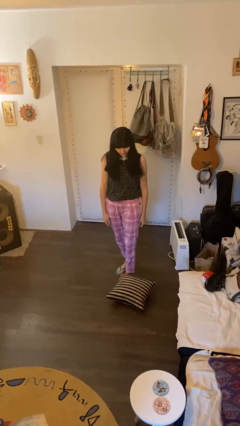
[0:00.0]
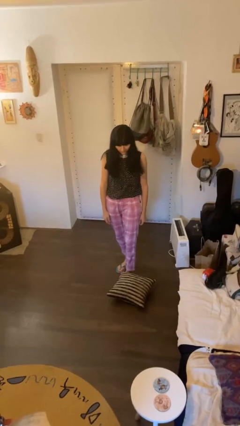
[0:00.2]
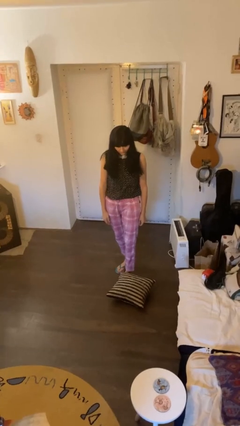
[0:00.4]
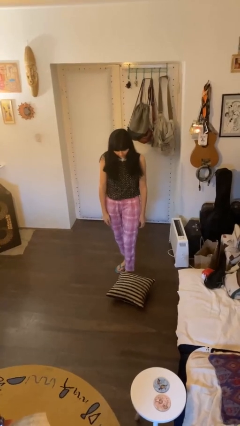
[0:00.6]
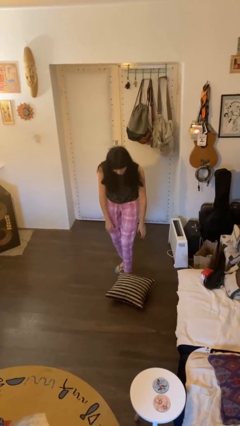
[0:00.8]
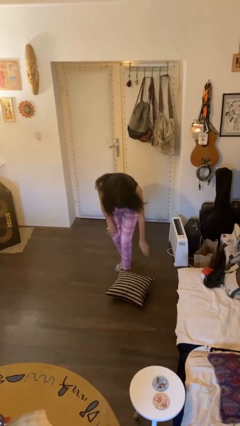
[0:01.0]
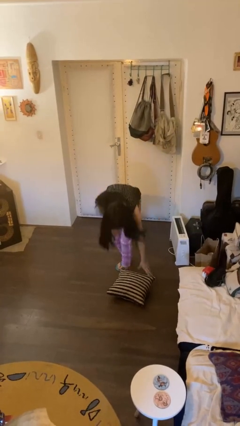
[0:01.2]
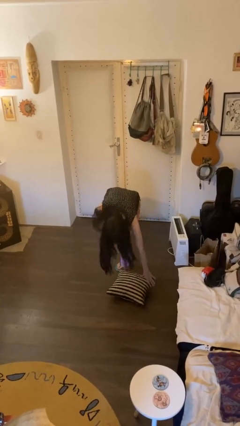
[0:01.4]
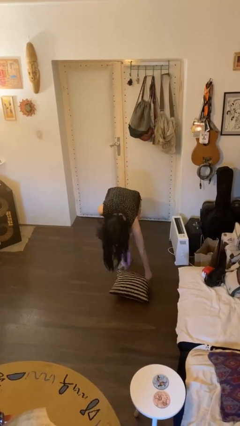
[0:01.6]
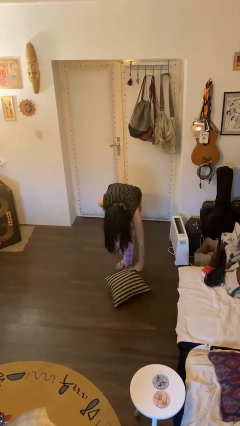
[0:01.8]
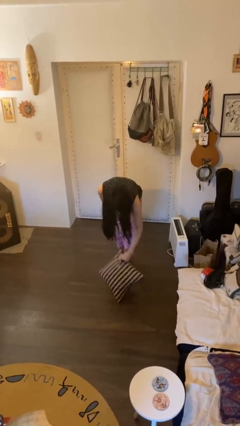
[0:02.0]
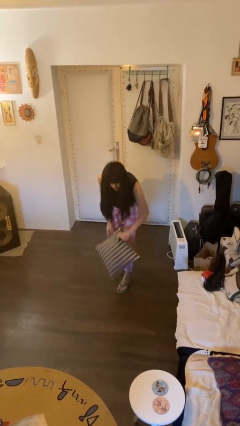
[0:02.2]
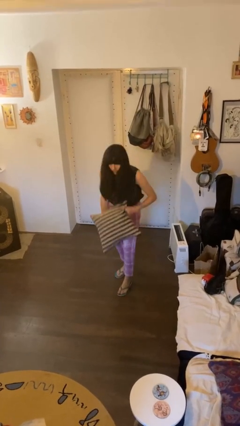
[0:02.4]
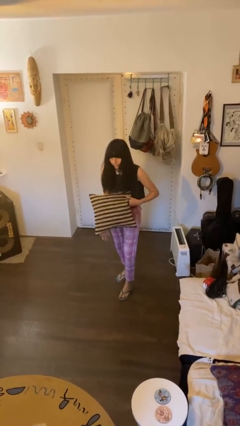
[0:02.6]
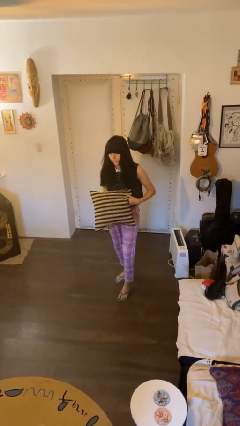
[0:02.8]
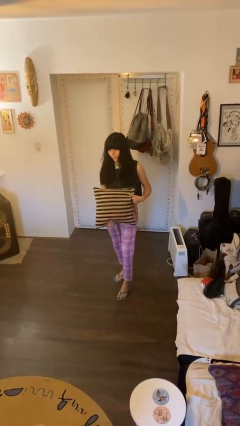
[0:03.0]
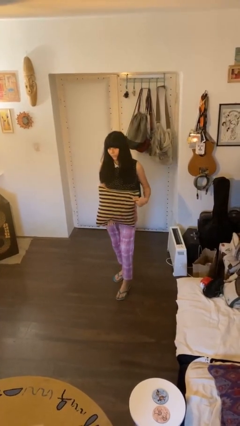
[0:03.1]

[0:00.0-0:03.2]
person picks up object from floor

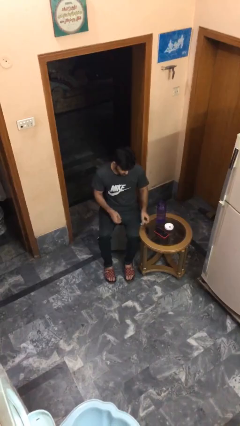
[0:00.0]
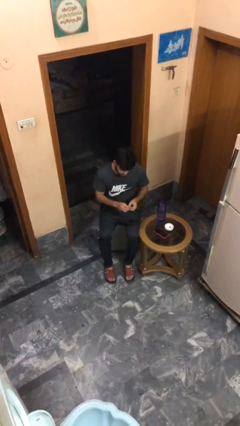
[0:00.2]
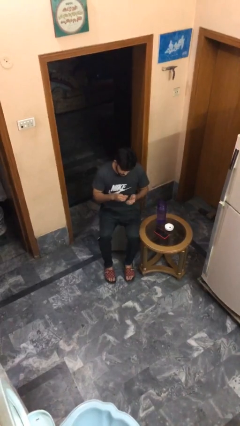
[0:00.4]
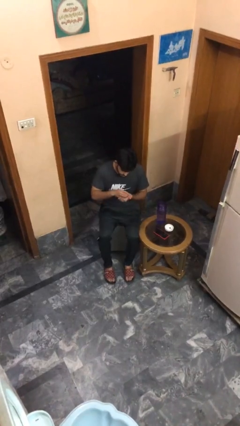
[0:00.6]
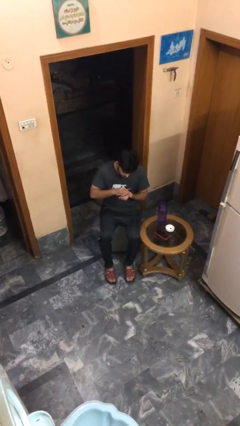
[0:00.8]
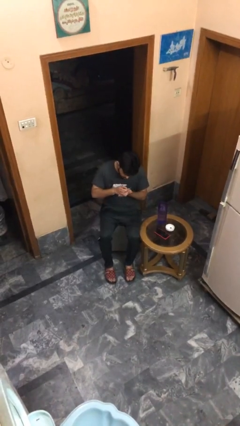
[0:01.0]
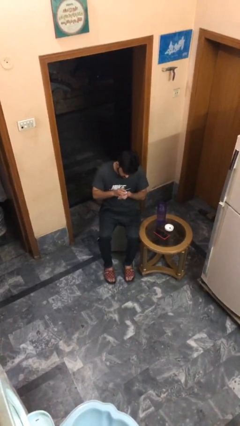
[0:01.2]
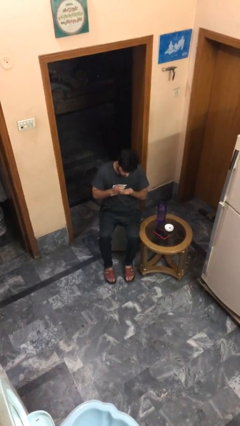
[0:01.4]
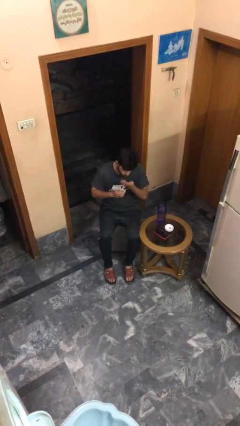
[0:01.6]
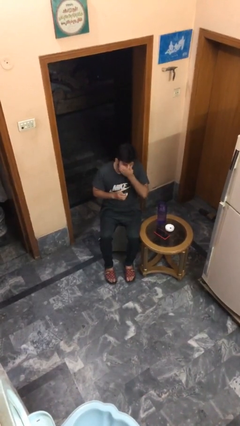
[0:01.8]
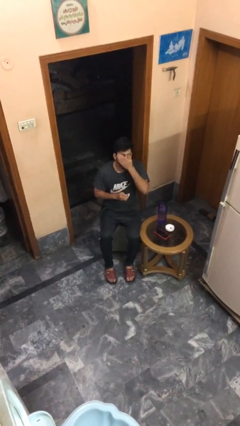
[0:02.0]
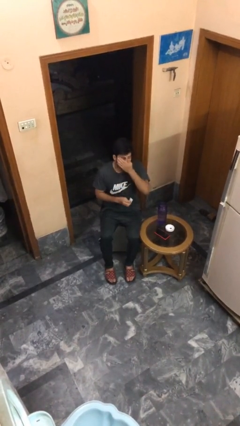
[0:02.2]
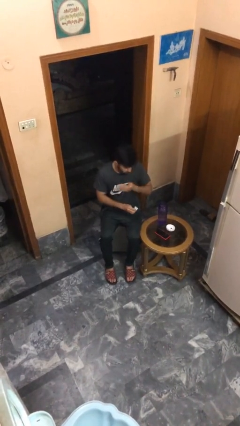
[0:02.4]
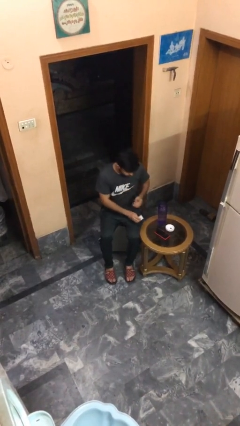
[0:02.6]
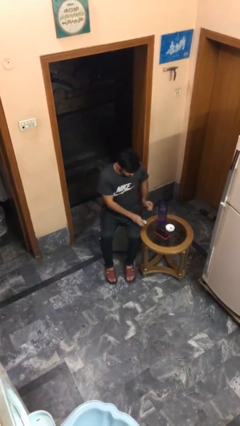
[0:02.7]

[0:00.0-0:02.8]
person takes medicine pills

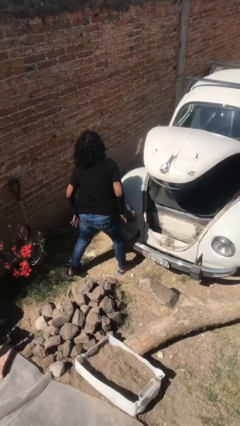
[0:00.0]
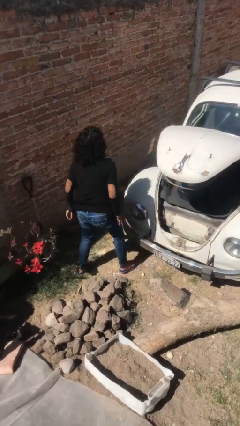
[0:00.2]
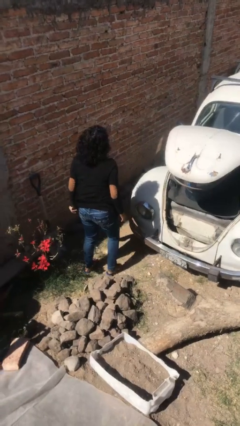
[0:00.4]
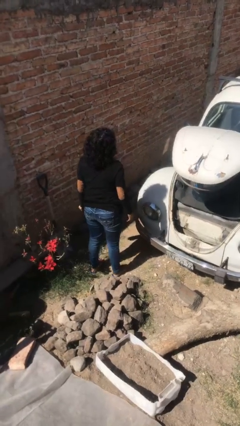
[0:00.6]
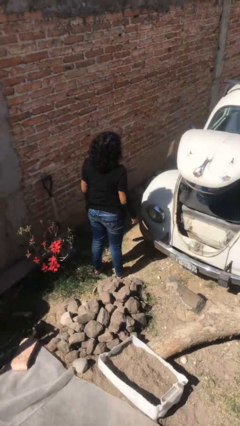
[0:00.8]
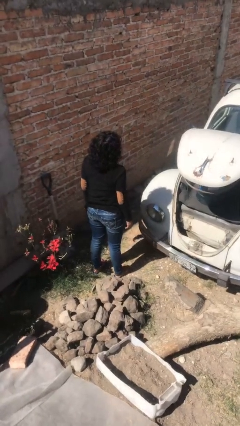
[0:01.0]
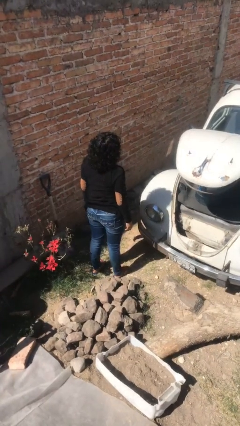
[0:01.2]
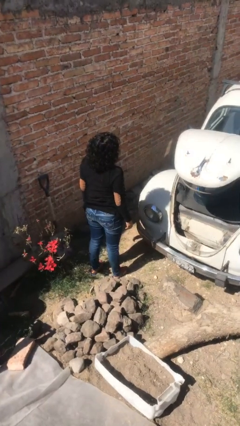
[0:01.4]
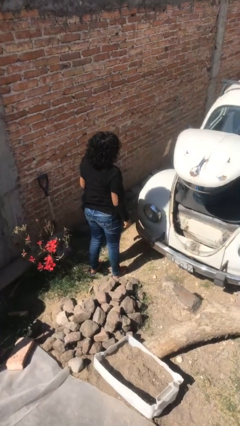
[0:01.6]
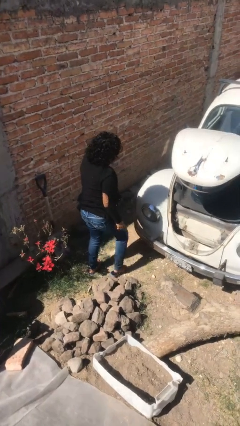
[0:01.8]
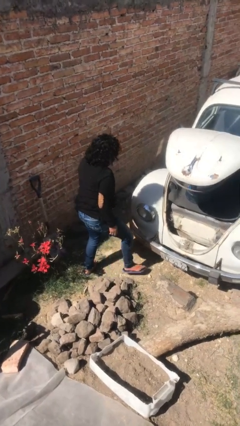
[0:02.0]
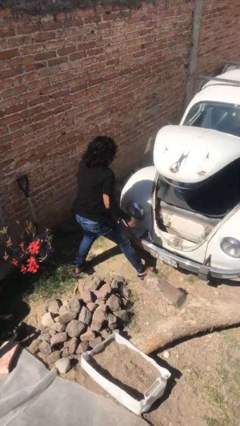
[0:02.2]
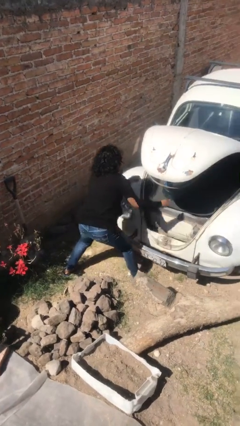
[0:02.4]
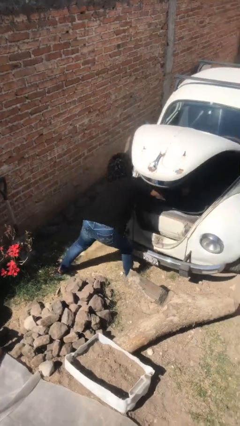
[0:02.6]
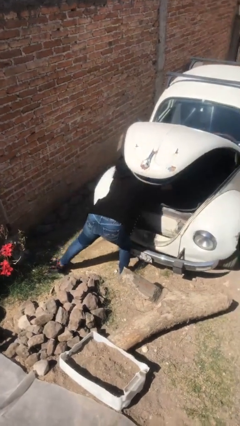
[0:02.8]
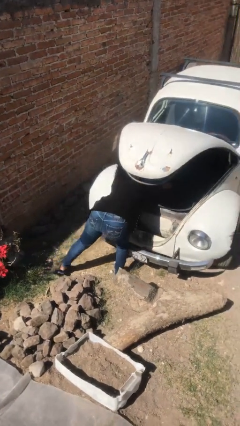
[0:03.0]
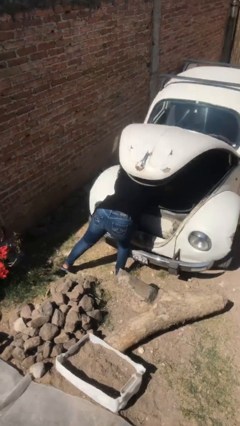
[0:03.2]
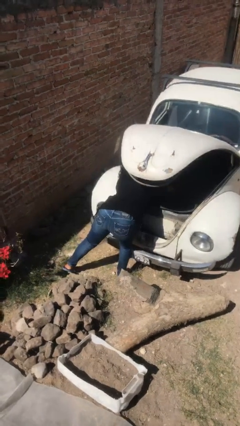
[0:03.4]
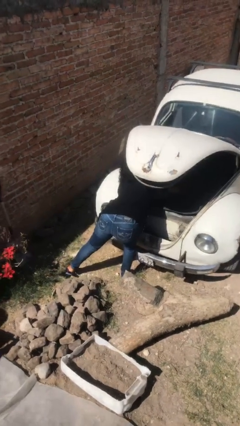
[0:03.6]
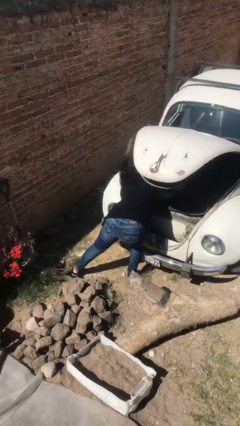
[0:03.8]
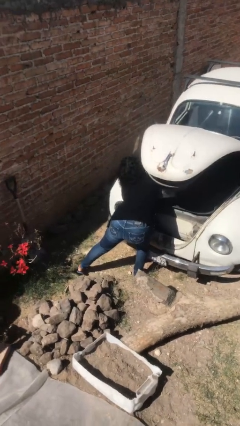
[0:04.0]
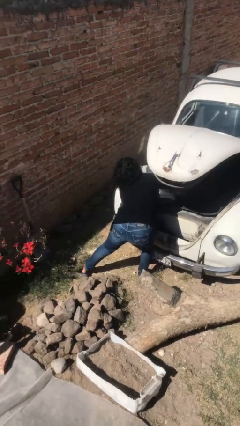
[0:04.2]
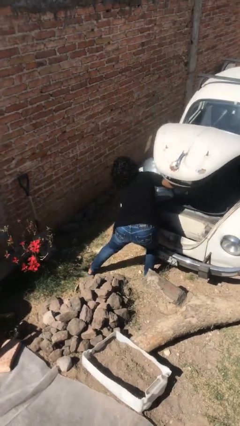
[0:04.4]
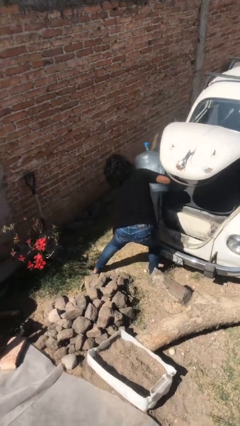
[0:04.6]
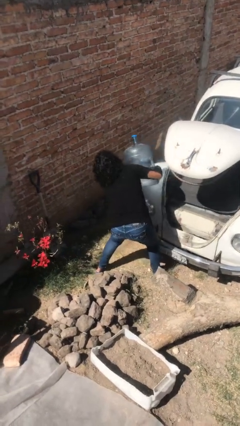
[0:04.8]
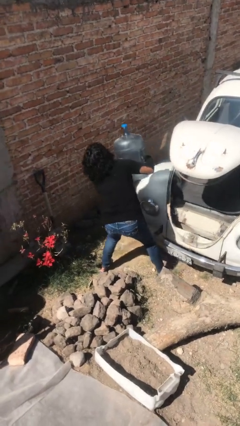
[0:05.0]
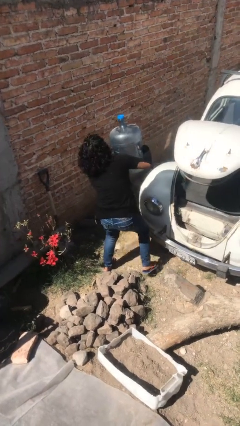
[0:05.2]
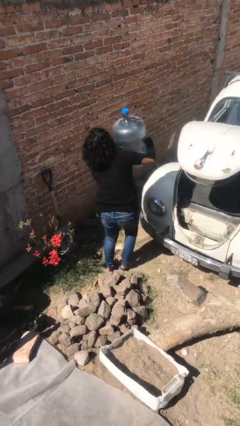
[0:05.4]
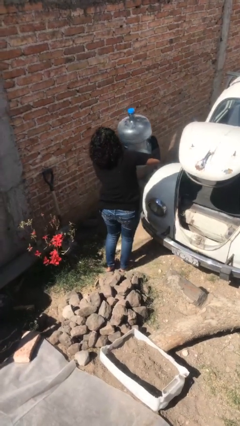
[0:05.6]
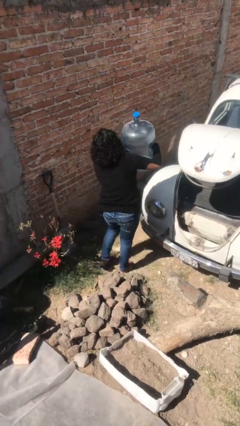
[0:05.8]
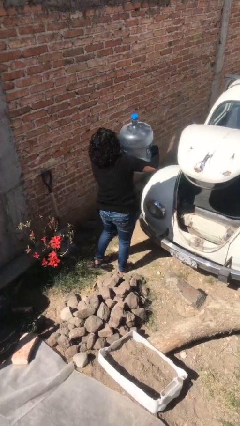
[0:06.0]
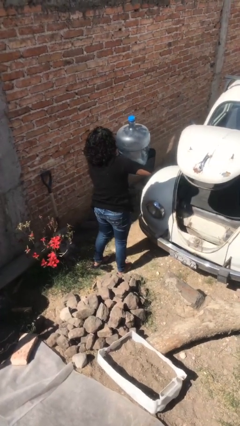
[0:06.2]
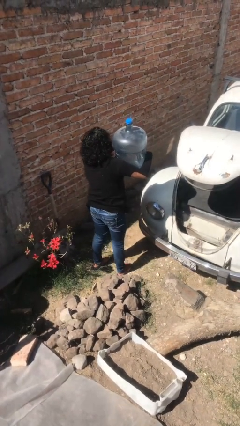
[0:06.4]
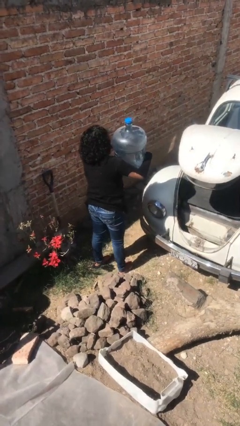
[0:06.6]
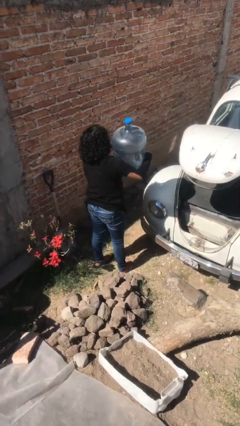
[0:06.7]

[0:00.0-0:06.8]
person unloads car

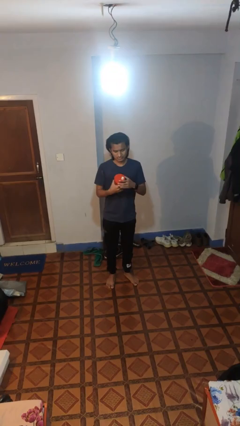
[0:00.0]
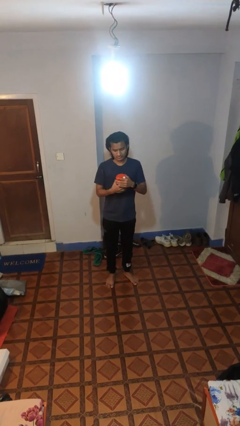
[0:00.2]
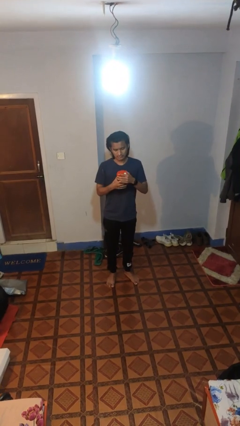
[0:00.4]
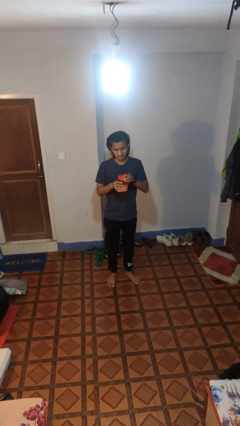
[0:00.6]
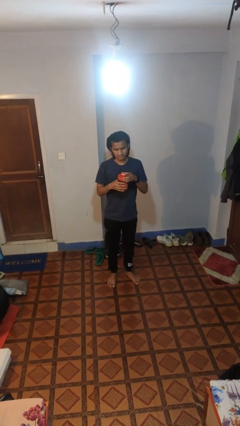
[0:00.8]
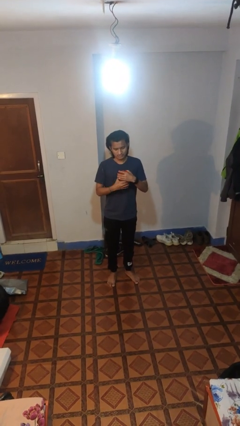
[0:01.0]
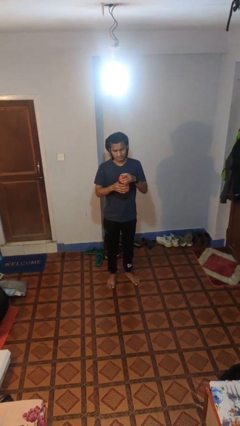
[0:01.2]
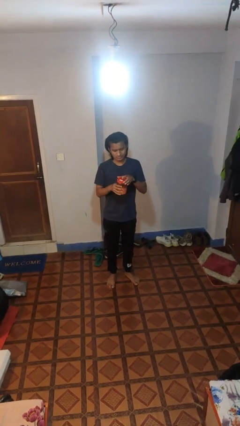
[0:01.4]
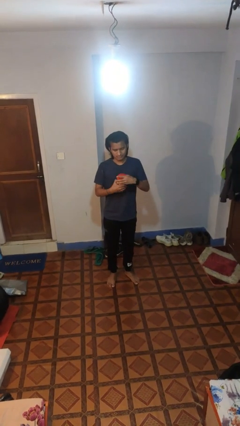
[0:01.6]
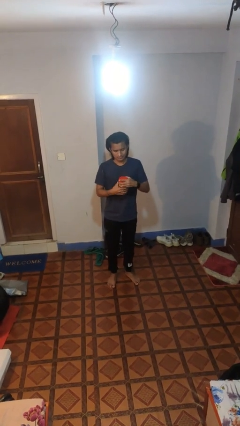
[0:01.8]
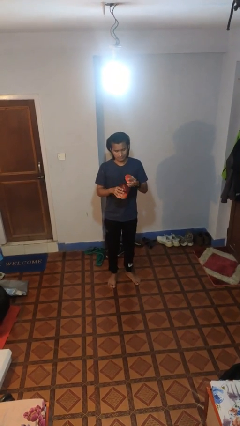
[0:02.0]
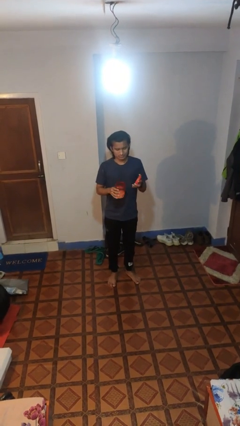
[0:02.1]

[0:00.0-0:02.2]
person opens jar

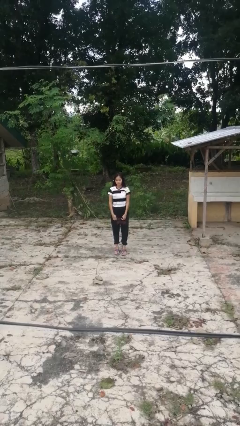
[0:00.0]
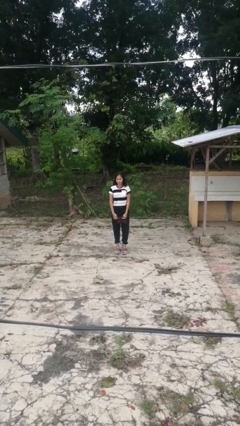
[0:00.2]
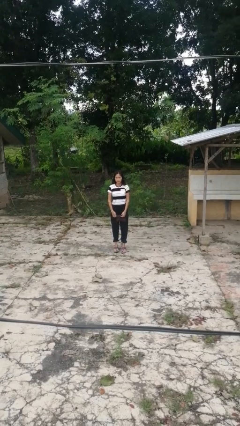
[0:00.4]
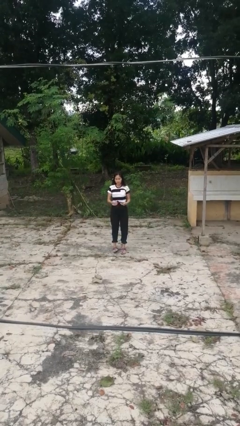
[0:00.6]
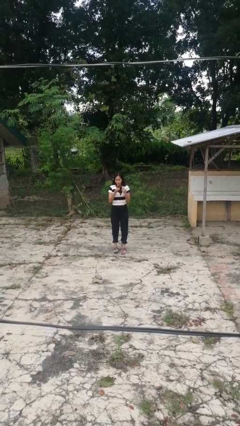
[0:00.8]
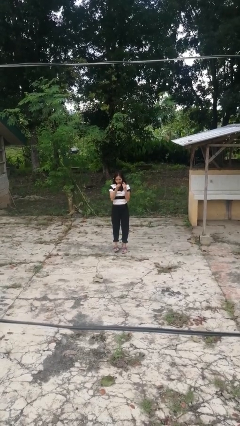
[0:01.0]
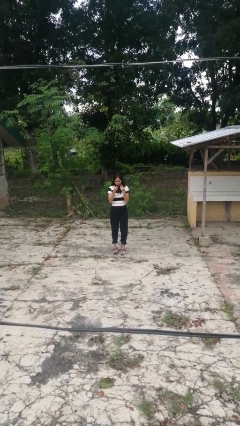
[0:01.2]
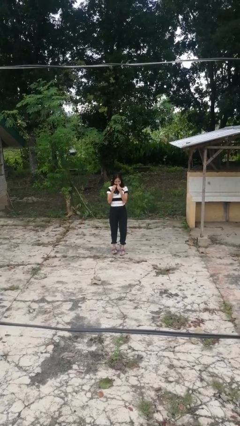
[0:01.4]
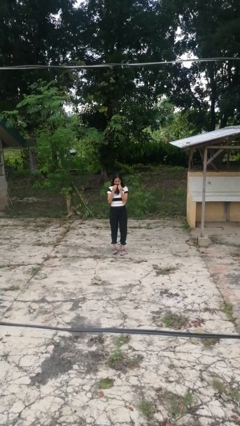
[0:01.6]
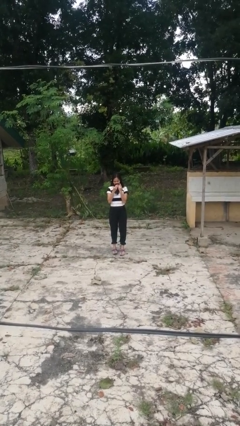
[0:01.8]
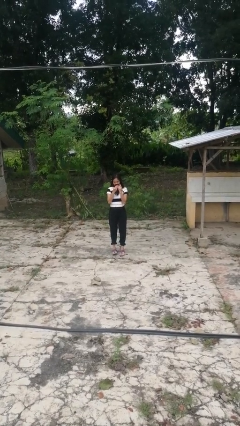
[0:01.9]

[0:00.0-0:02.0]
person wipes mouth with napkin

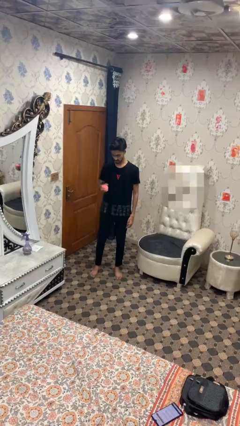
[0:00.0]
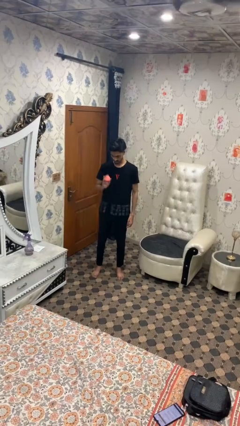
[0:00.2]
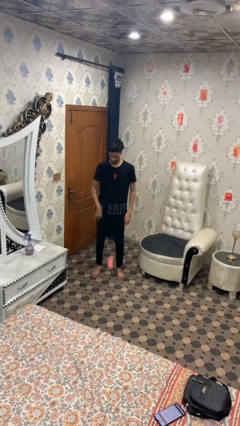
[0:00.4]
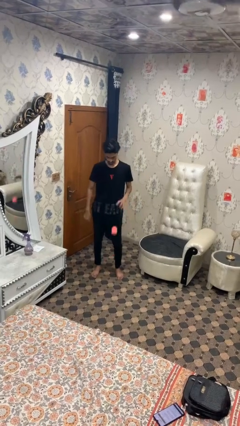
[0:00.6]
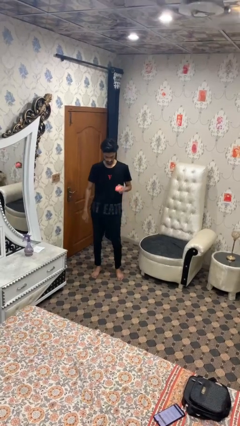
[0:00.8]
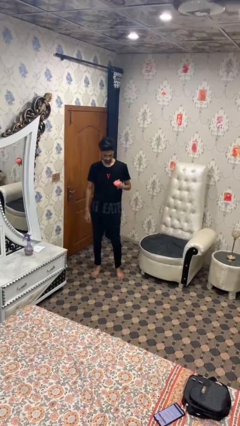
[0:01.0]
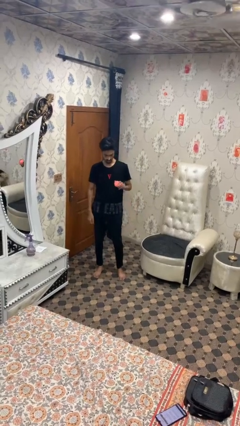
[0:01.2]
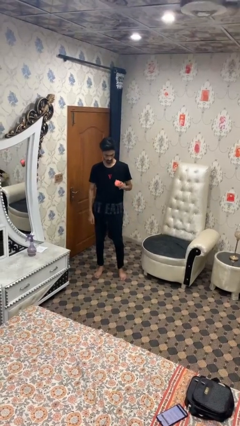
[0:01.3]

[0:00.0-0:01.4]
person bounces ball on floor
